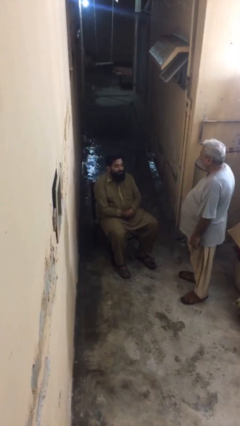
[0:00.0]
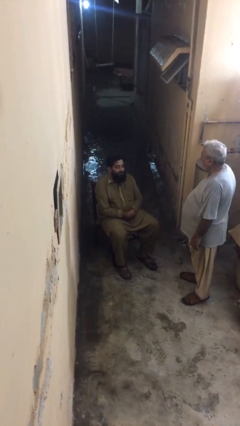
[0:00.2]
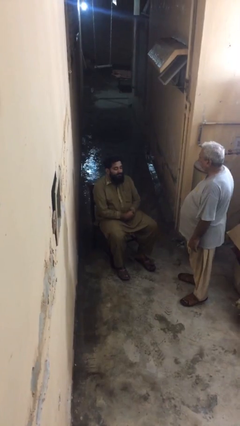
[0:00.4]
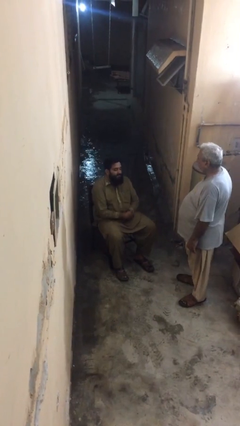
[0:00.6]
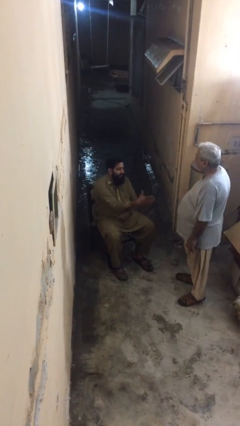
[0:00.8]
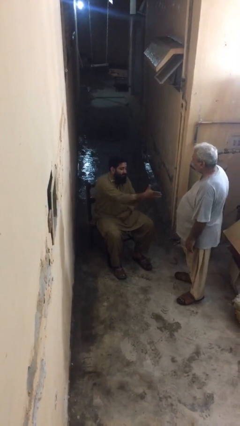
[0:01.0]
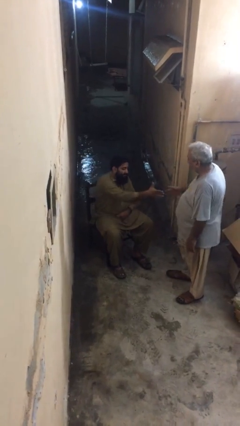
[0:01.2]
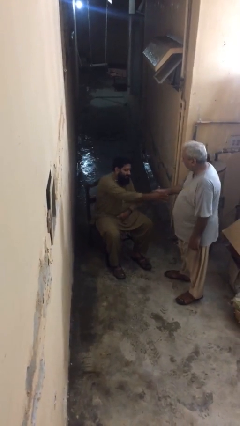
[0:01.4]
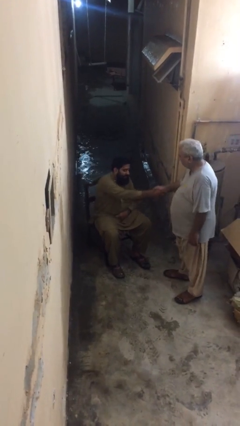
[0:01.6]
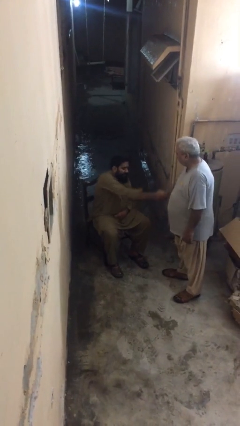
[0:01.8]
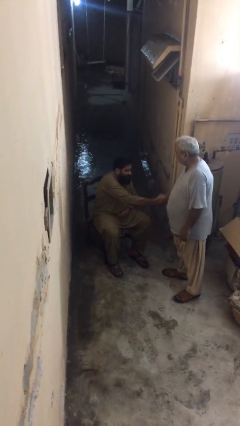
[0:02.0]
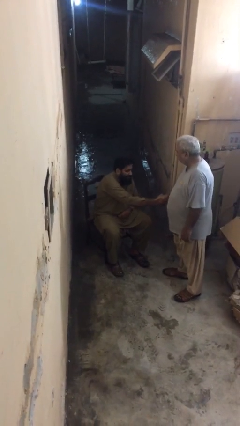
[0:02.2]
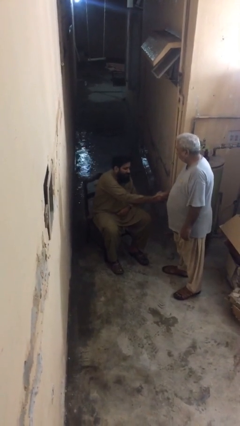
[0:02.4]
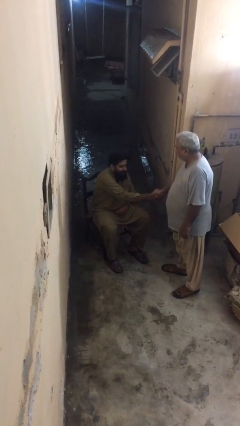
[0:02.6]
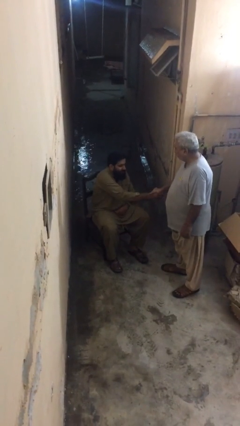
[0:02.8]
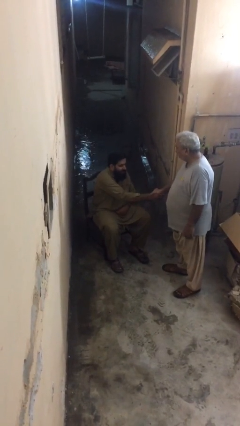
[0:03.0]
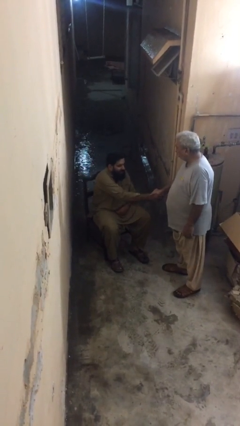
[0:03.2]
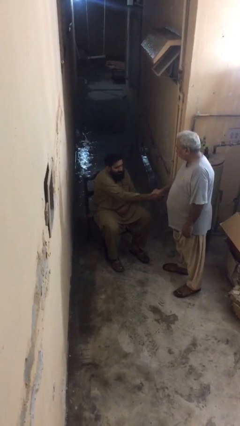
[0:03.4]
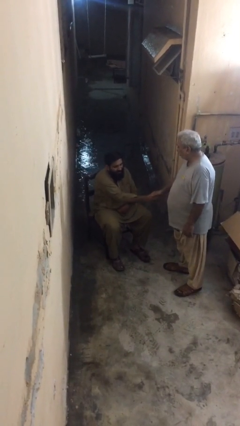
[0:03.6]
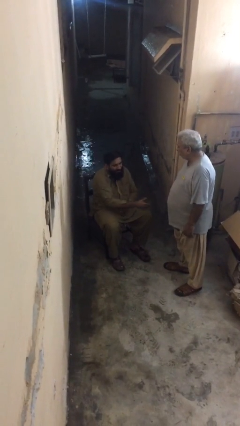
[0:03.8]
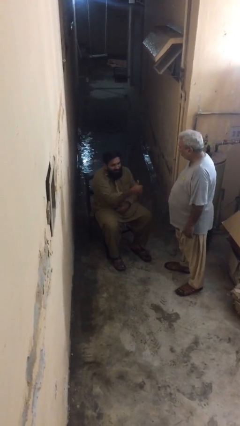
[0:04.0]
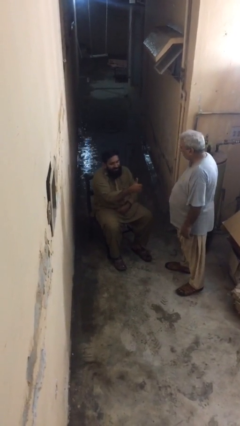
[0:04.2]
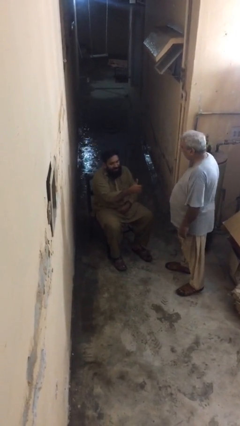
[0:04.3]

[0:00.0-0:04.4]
person shakes hand

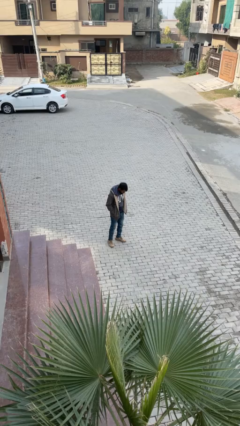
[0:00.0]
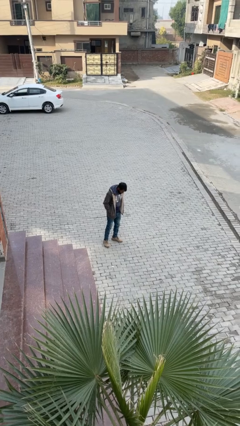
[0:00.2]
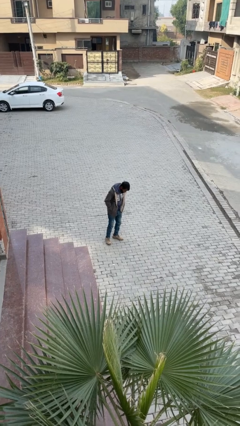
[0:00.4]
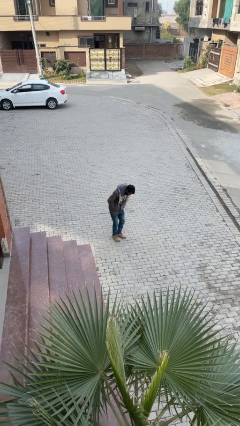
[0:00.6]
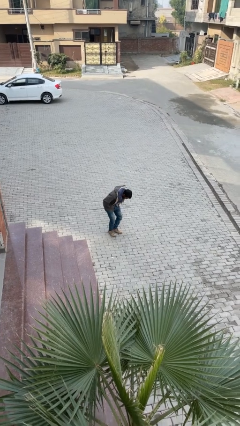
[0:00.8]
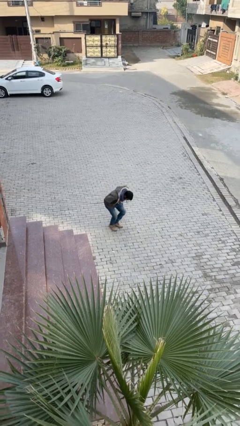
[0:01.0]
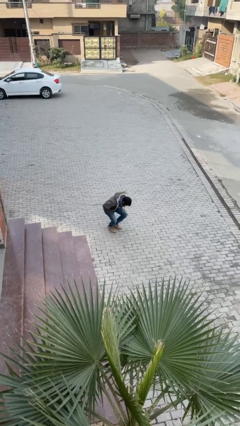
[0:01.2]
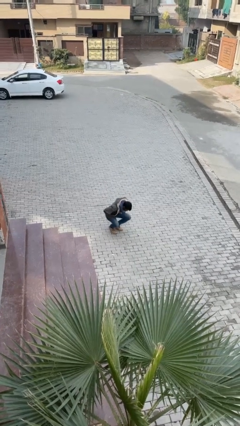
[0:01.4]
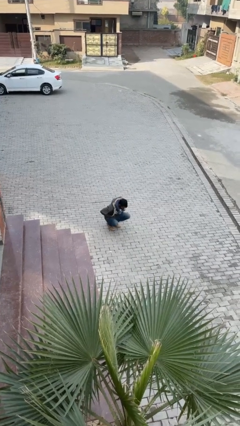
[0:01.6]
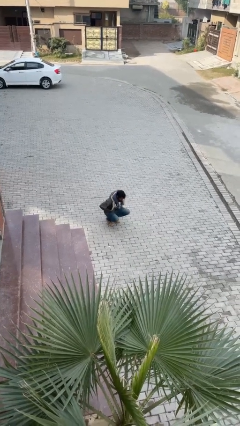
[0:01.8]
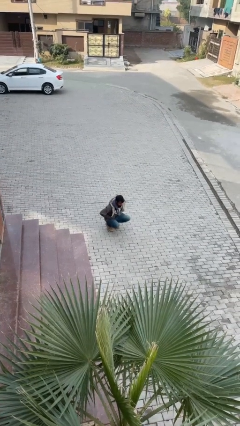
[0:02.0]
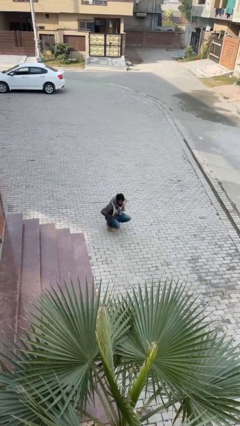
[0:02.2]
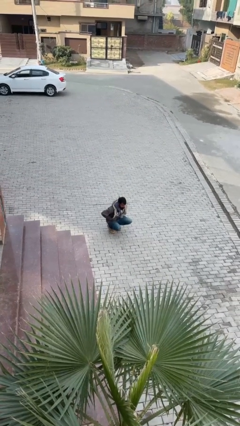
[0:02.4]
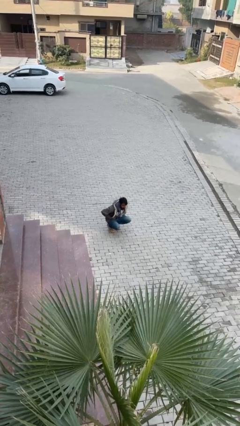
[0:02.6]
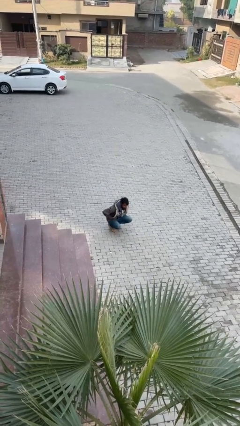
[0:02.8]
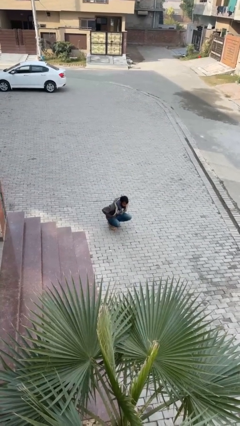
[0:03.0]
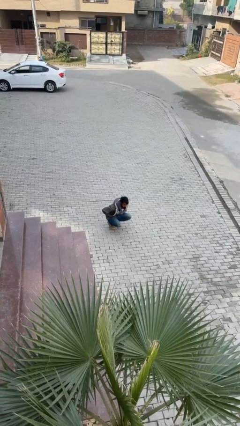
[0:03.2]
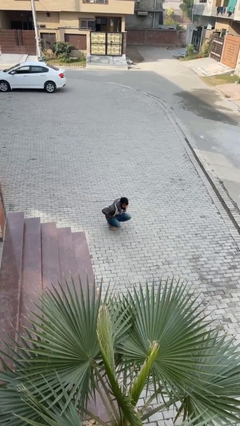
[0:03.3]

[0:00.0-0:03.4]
person sits down

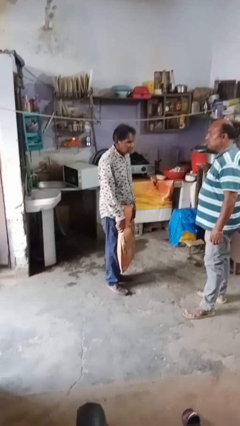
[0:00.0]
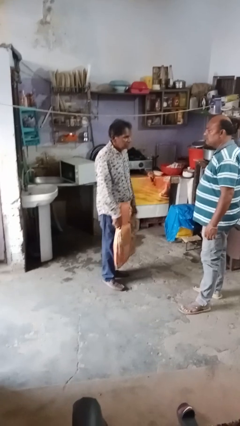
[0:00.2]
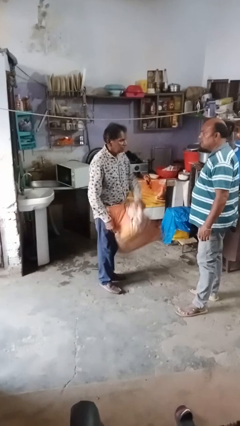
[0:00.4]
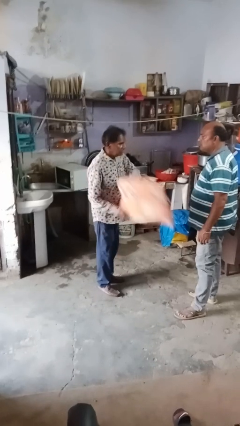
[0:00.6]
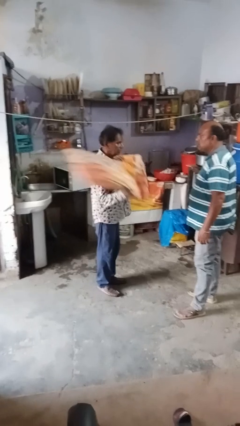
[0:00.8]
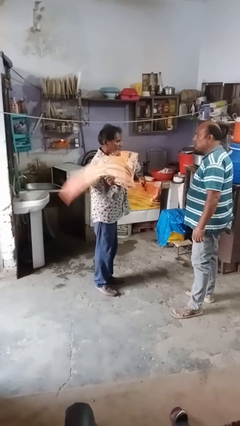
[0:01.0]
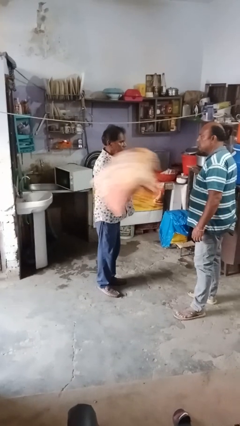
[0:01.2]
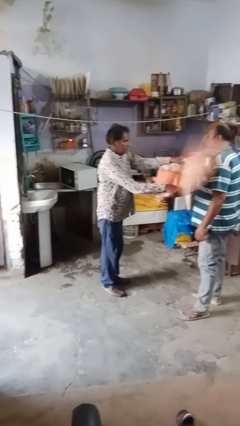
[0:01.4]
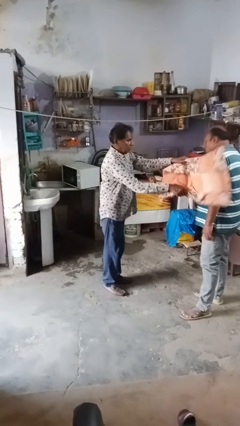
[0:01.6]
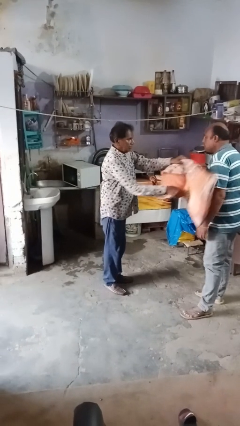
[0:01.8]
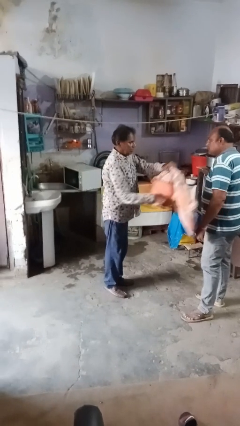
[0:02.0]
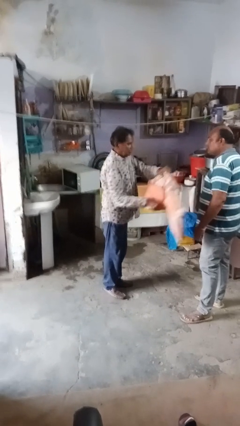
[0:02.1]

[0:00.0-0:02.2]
person hits person with pillow

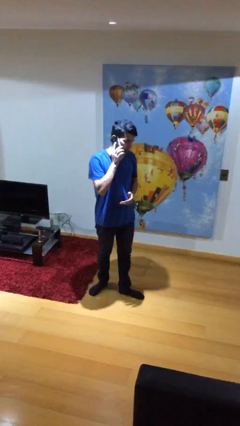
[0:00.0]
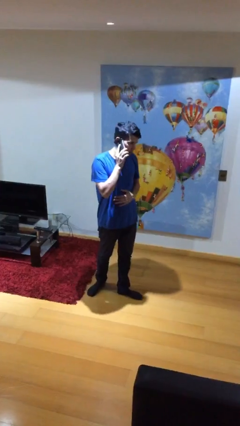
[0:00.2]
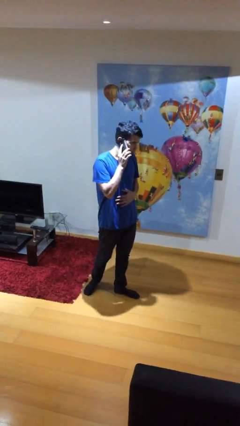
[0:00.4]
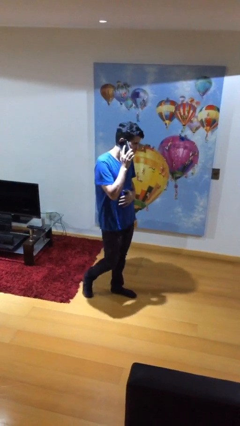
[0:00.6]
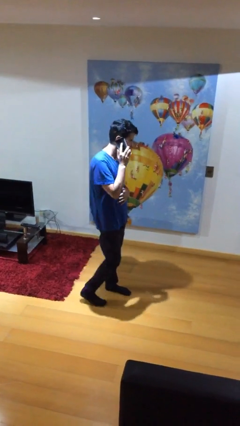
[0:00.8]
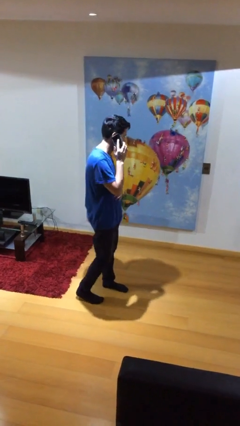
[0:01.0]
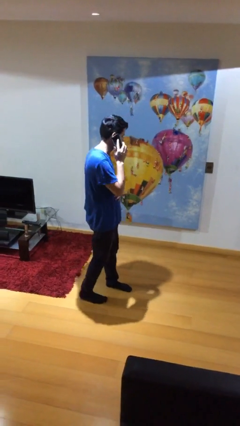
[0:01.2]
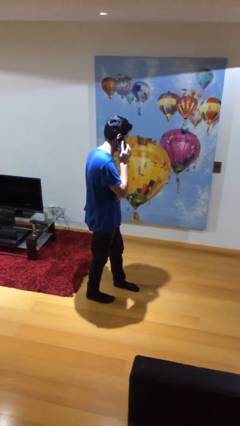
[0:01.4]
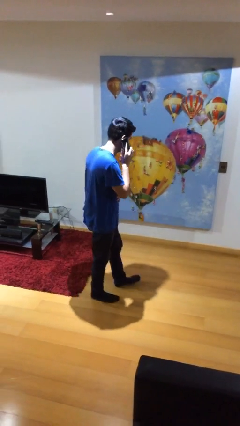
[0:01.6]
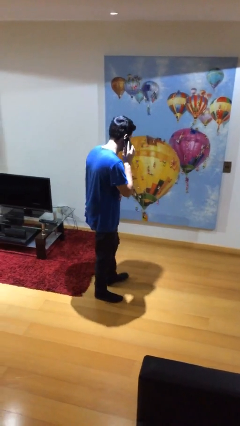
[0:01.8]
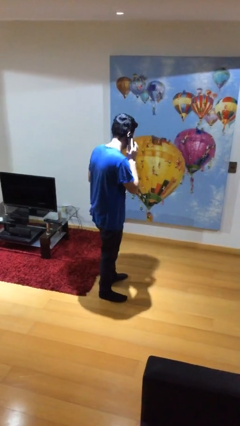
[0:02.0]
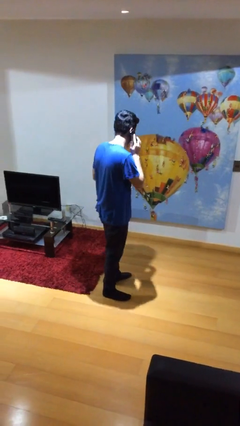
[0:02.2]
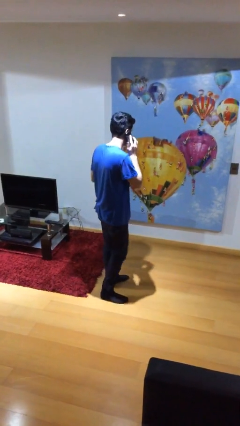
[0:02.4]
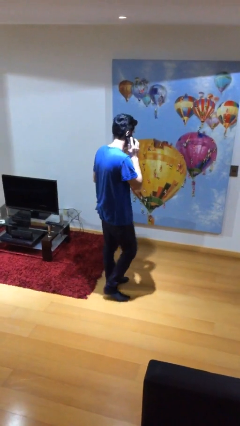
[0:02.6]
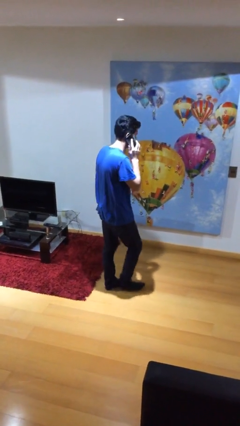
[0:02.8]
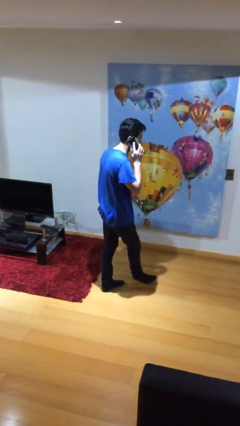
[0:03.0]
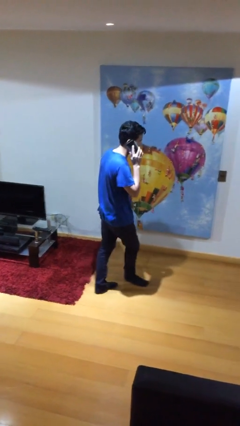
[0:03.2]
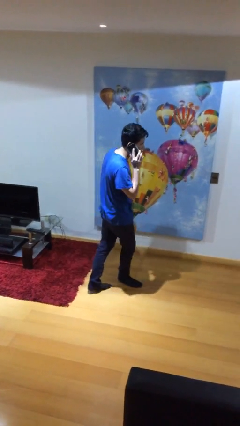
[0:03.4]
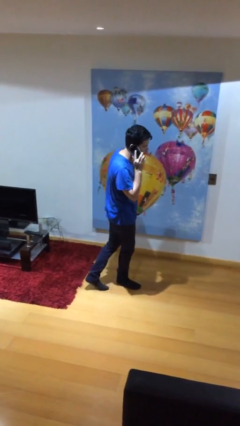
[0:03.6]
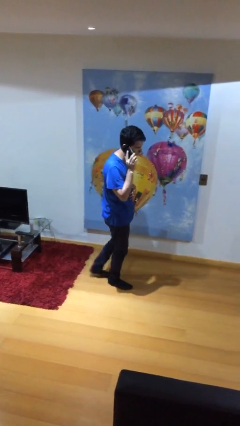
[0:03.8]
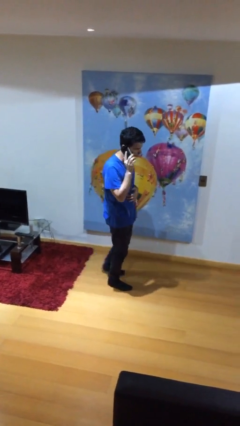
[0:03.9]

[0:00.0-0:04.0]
person talks on phone

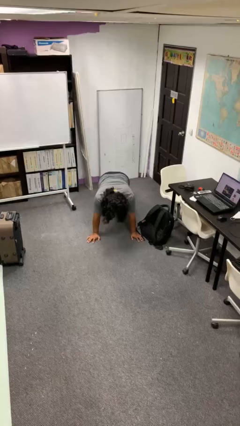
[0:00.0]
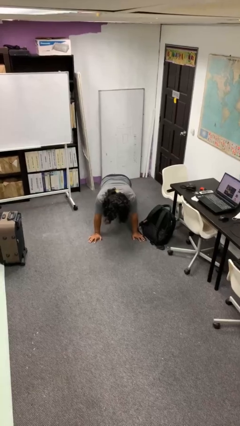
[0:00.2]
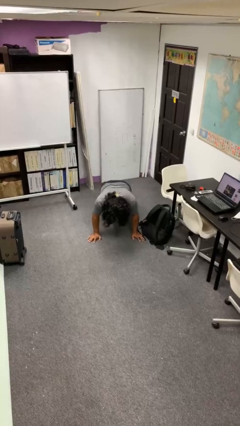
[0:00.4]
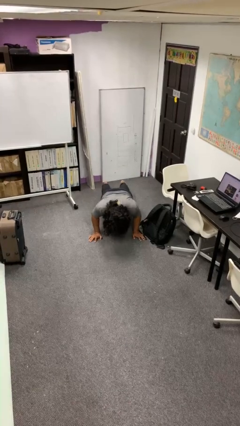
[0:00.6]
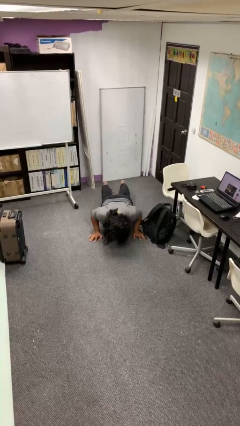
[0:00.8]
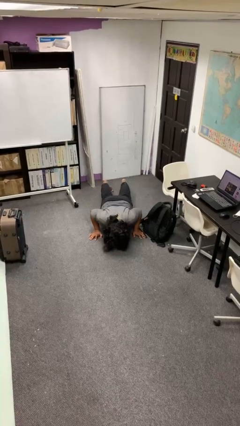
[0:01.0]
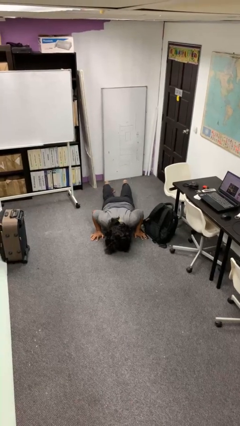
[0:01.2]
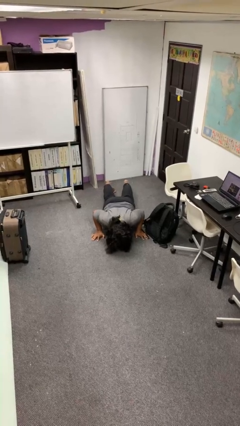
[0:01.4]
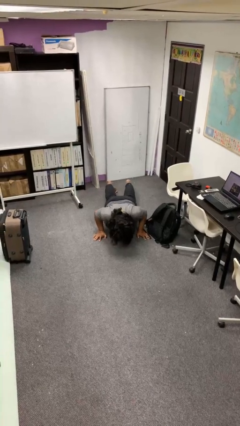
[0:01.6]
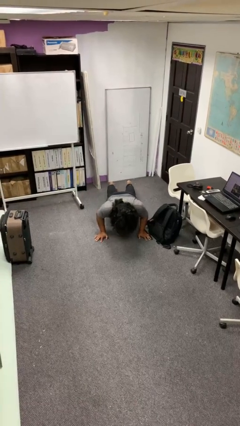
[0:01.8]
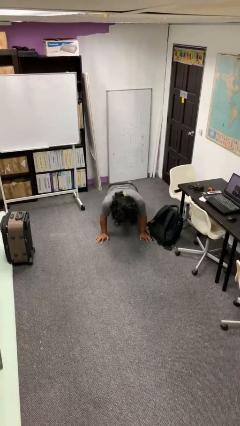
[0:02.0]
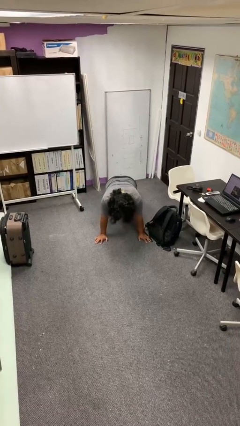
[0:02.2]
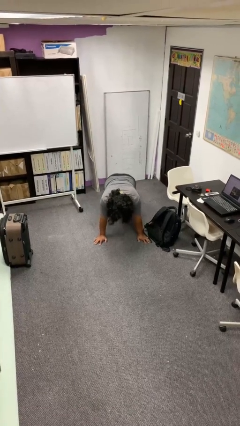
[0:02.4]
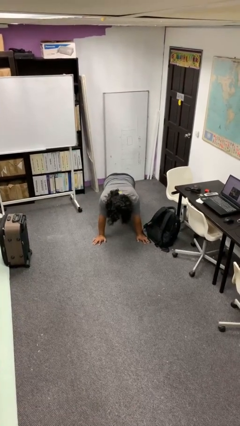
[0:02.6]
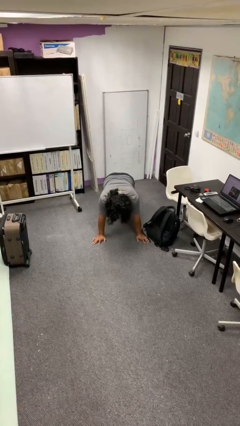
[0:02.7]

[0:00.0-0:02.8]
person exercises with pushup

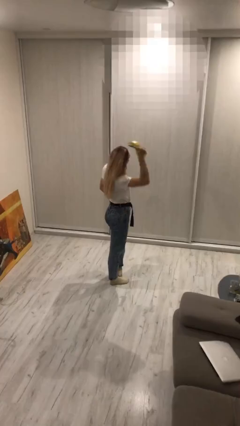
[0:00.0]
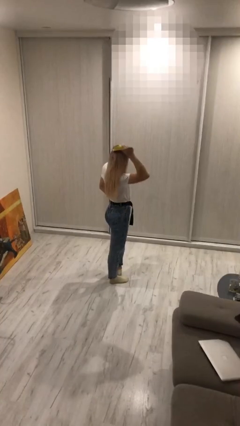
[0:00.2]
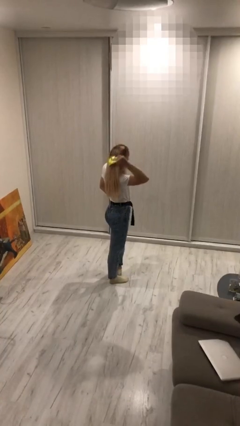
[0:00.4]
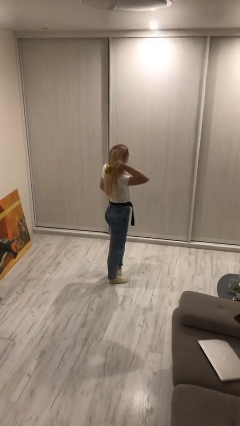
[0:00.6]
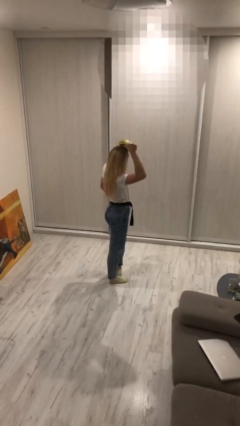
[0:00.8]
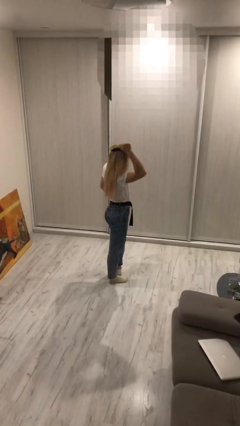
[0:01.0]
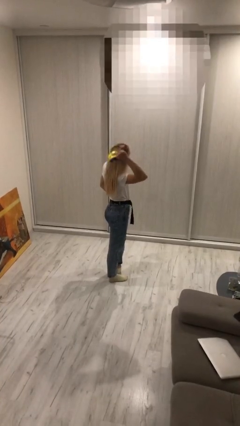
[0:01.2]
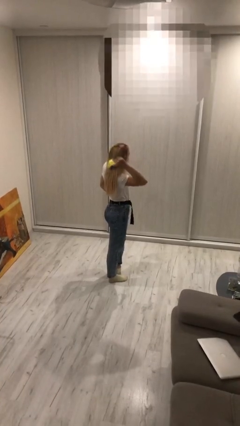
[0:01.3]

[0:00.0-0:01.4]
person brushes hair
